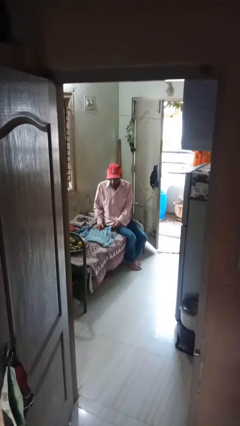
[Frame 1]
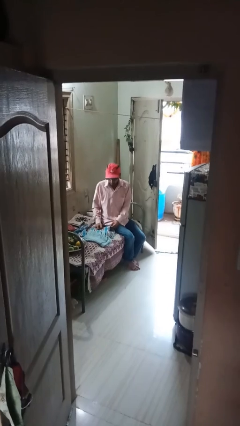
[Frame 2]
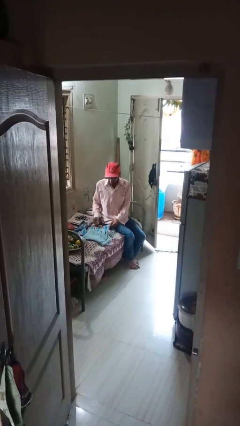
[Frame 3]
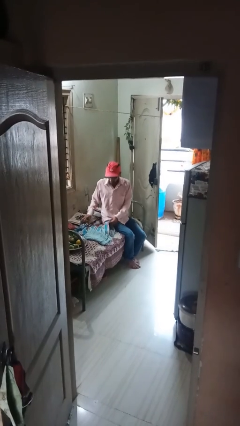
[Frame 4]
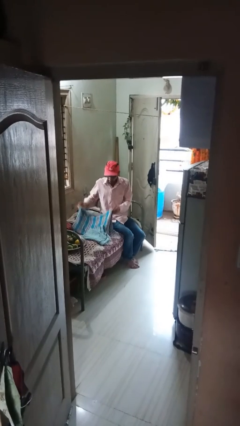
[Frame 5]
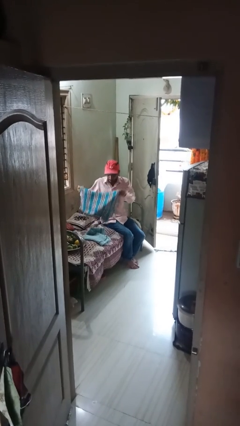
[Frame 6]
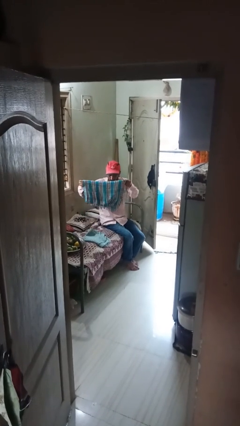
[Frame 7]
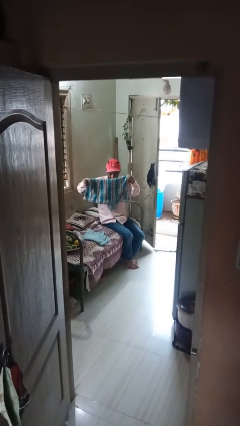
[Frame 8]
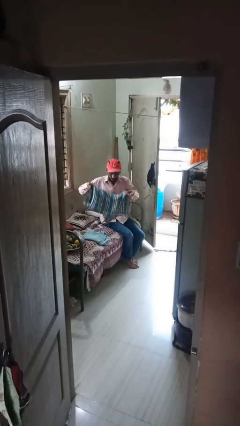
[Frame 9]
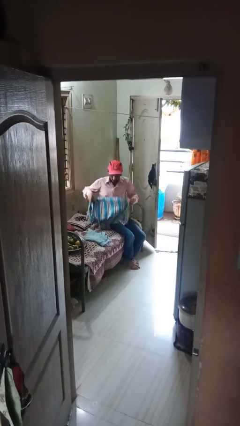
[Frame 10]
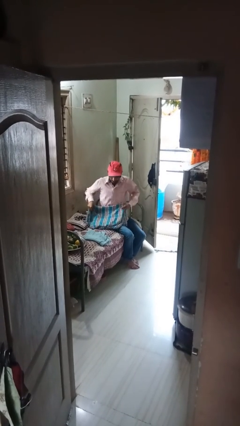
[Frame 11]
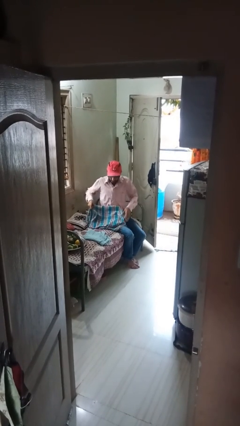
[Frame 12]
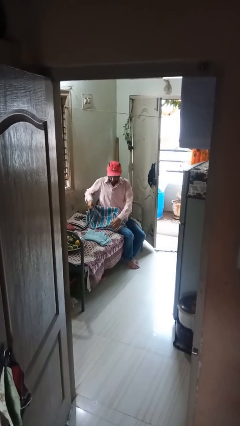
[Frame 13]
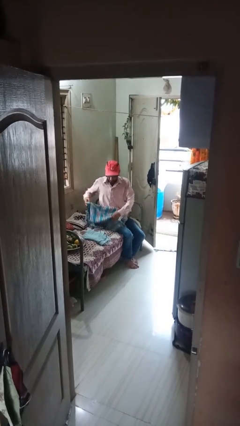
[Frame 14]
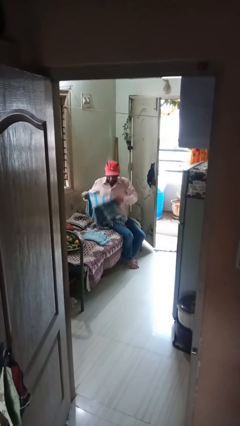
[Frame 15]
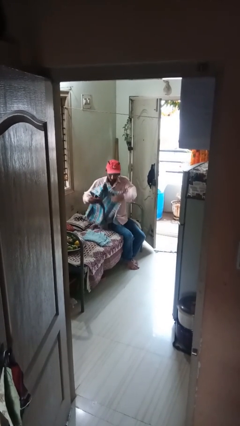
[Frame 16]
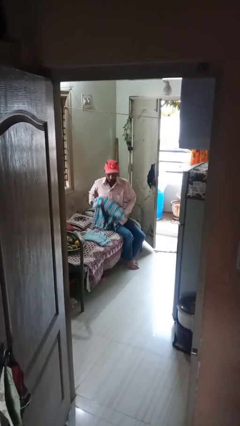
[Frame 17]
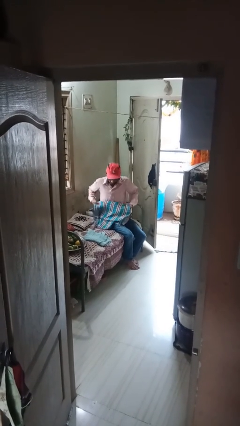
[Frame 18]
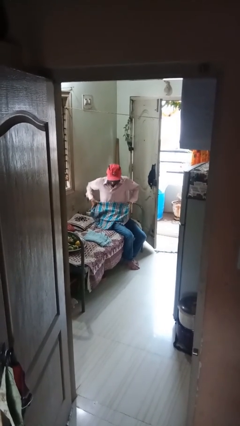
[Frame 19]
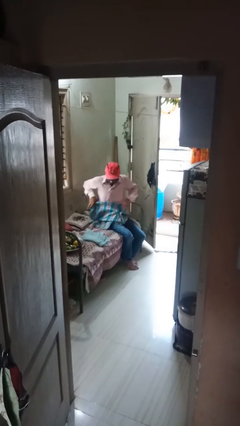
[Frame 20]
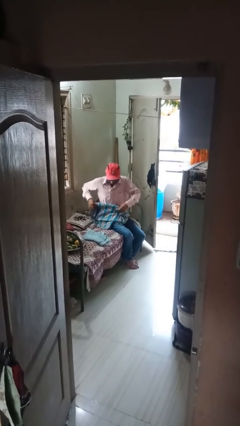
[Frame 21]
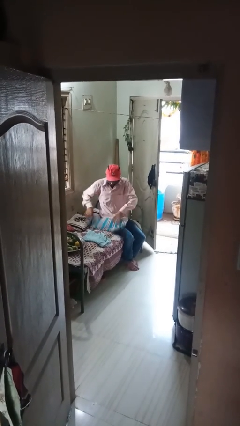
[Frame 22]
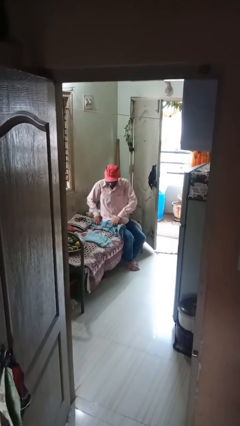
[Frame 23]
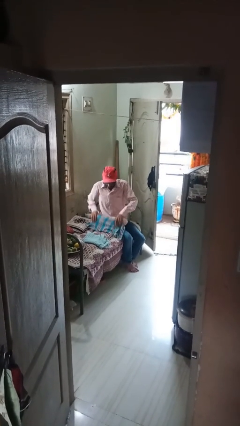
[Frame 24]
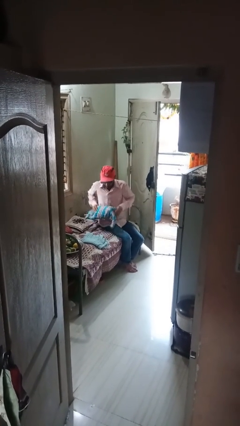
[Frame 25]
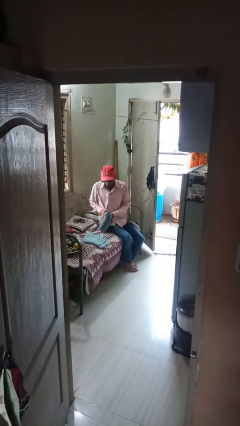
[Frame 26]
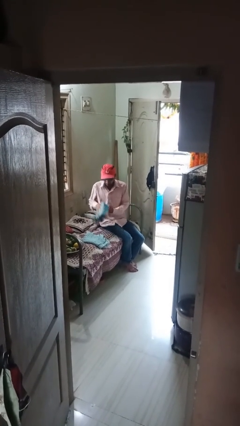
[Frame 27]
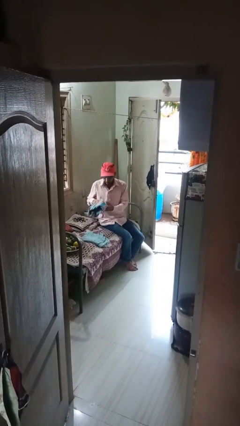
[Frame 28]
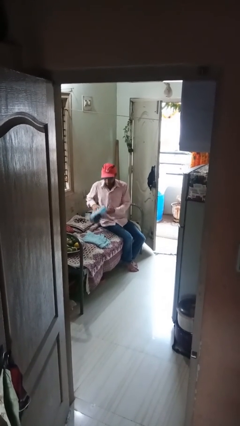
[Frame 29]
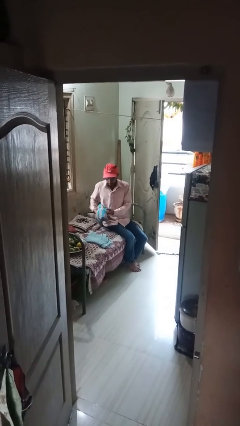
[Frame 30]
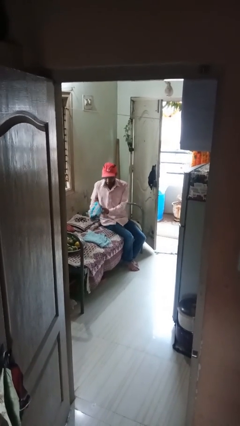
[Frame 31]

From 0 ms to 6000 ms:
person folds towel

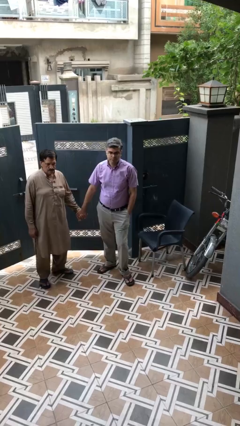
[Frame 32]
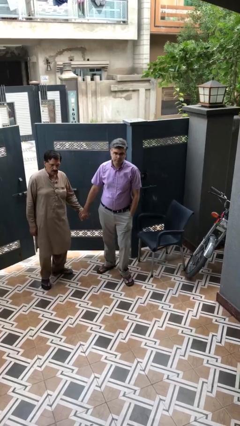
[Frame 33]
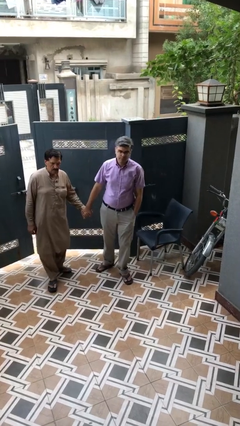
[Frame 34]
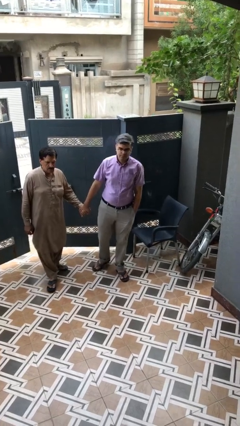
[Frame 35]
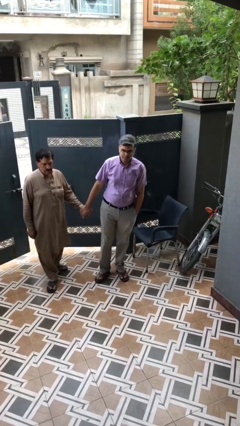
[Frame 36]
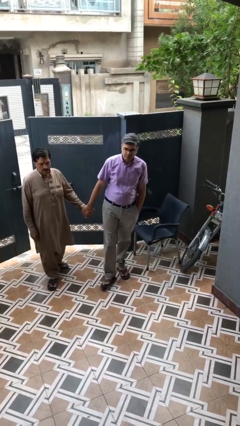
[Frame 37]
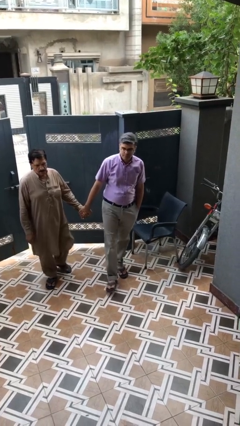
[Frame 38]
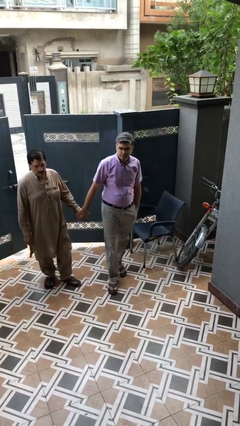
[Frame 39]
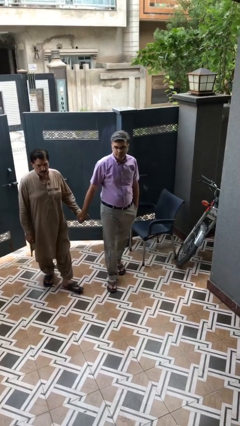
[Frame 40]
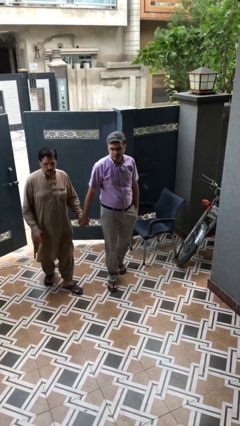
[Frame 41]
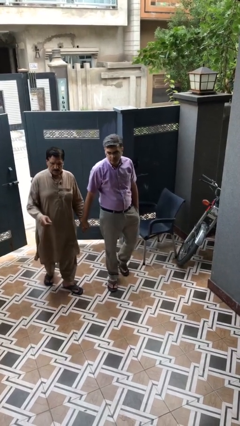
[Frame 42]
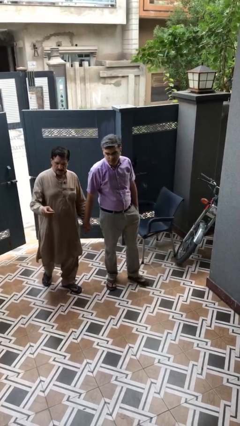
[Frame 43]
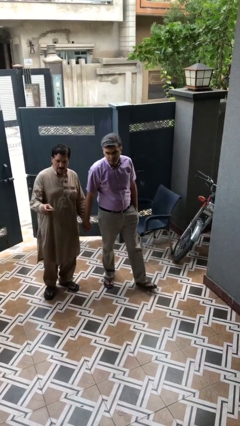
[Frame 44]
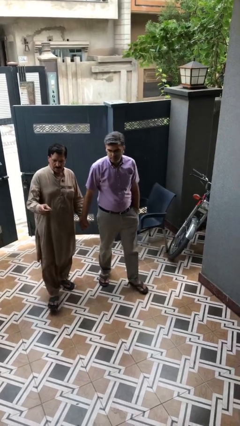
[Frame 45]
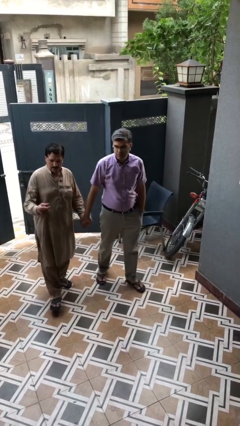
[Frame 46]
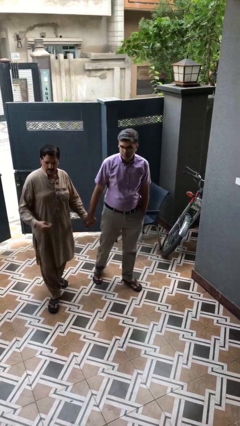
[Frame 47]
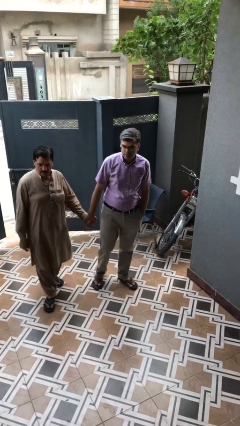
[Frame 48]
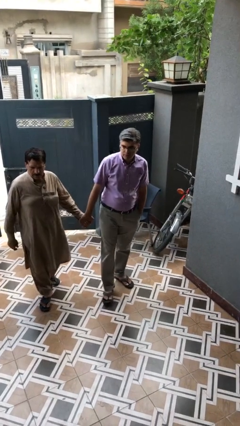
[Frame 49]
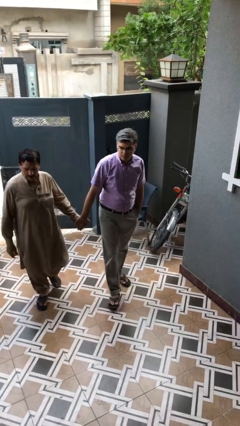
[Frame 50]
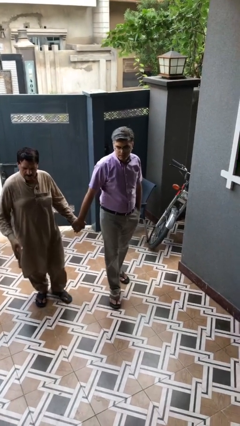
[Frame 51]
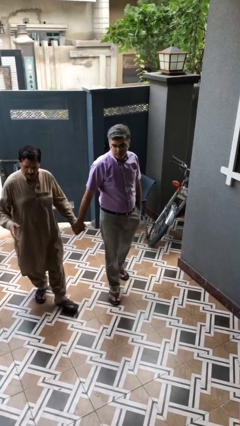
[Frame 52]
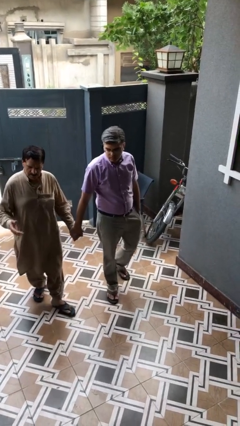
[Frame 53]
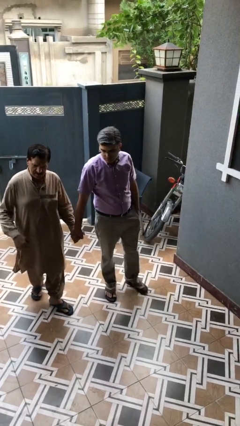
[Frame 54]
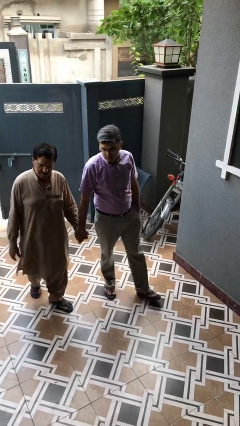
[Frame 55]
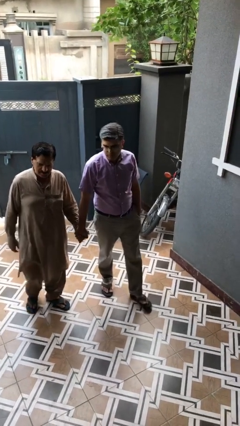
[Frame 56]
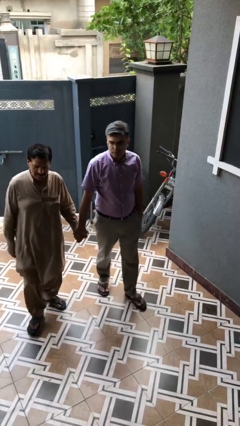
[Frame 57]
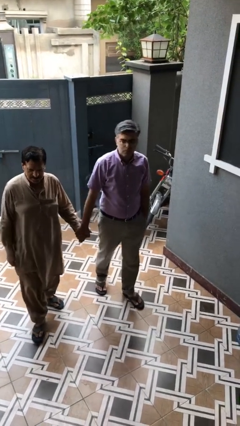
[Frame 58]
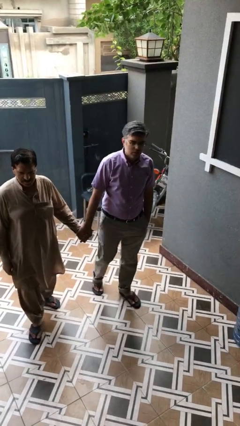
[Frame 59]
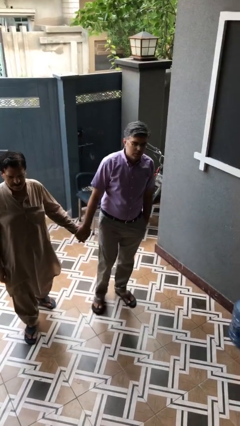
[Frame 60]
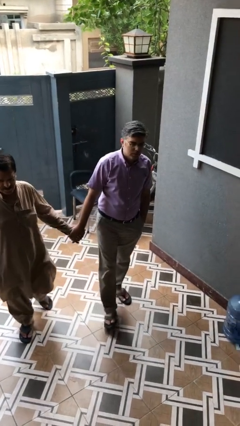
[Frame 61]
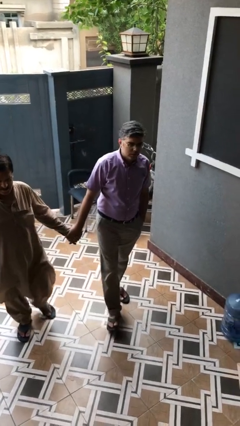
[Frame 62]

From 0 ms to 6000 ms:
person holds hand

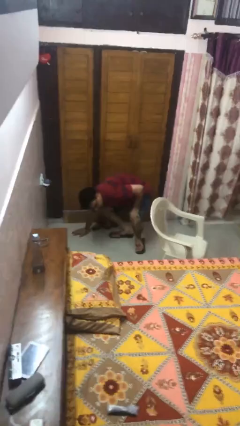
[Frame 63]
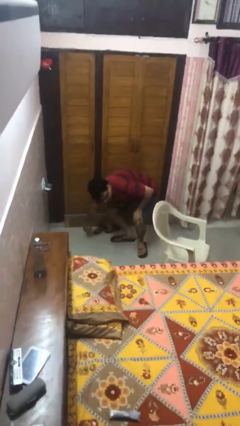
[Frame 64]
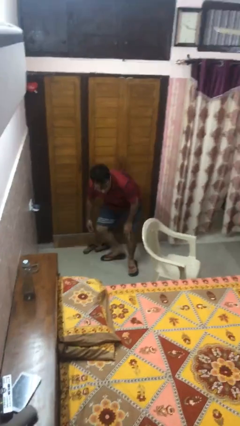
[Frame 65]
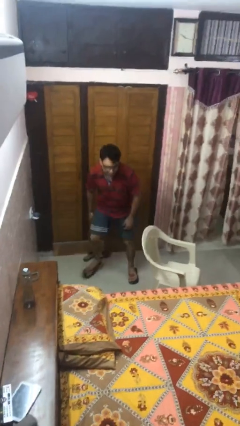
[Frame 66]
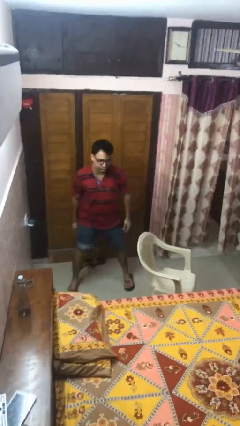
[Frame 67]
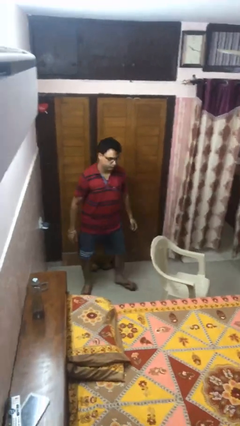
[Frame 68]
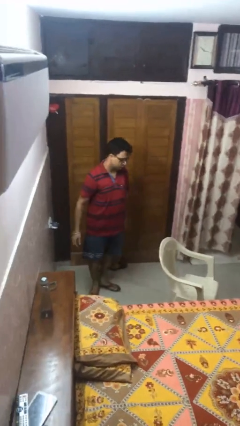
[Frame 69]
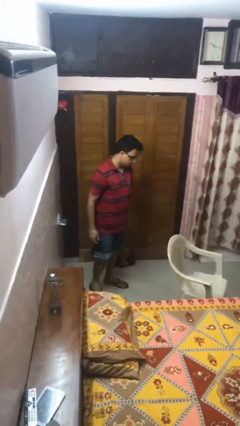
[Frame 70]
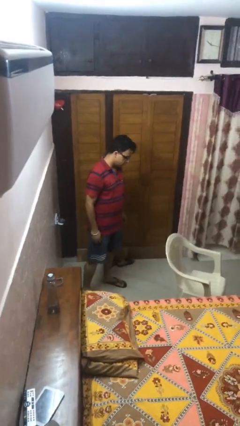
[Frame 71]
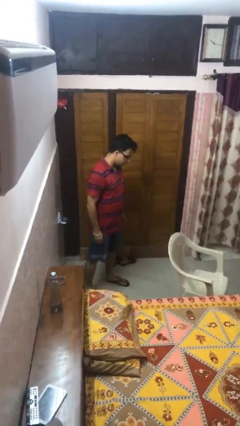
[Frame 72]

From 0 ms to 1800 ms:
person stands up from floor

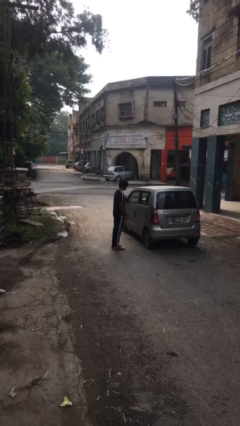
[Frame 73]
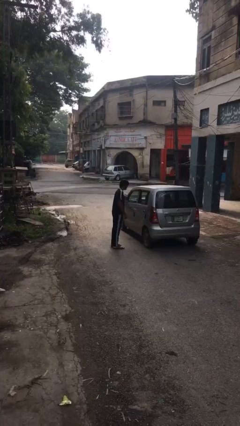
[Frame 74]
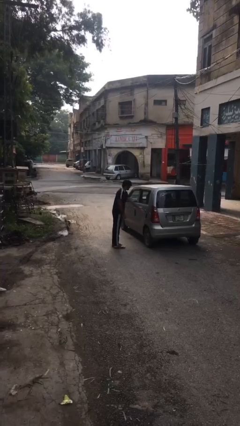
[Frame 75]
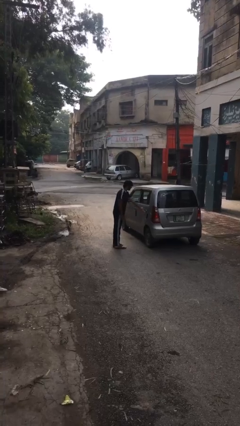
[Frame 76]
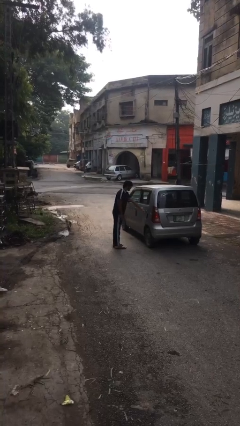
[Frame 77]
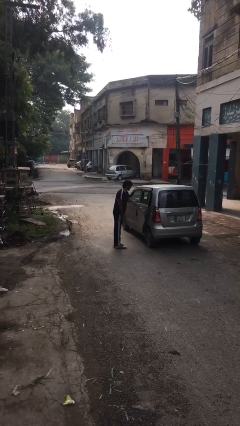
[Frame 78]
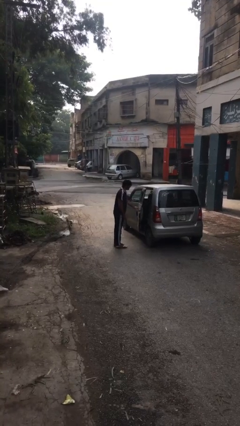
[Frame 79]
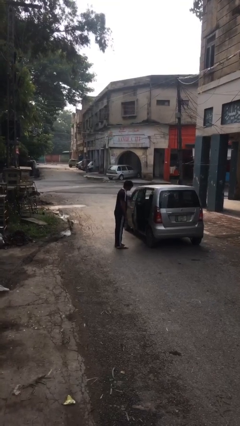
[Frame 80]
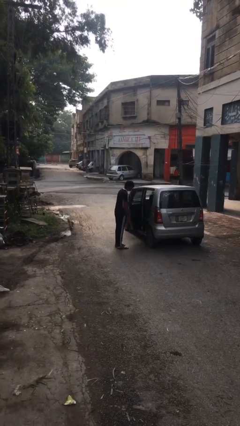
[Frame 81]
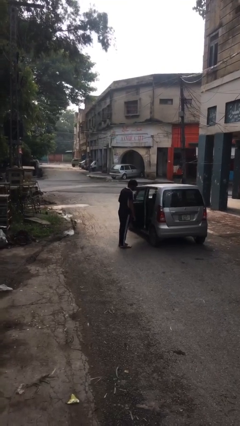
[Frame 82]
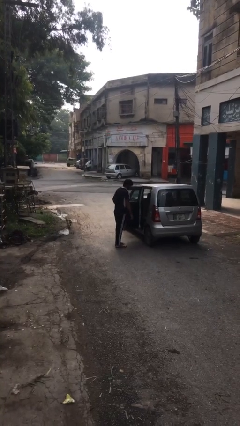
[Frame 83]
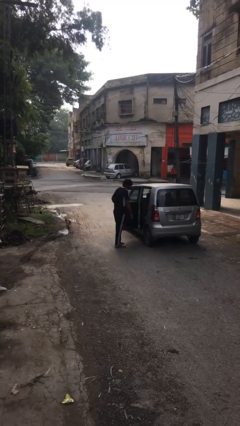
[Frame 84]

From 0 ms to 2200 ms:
person opens car door

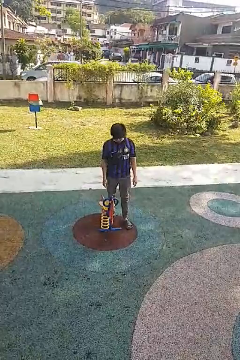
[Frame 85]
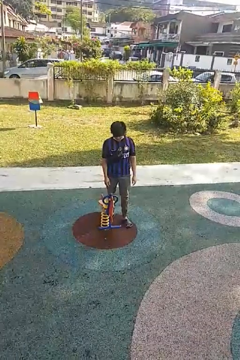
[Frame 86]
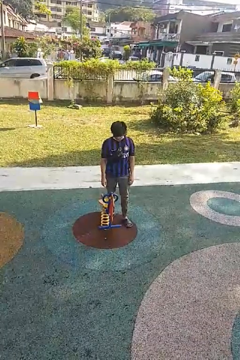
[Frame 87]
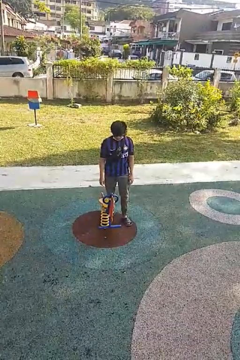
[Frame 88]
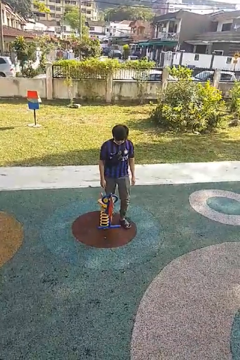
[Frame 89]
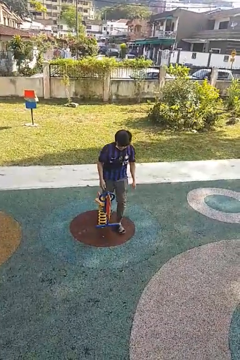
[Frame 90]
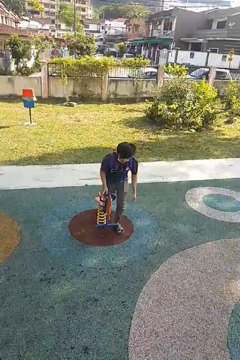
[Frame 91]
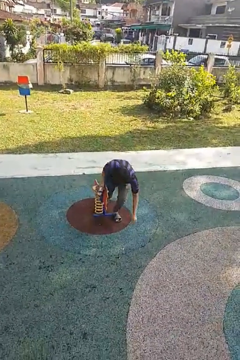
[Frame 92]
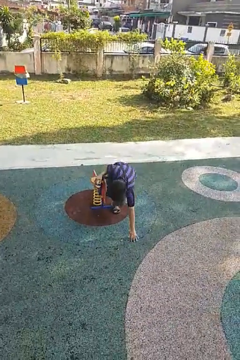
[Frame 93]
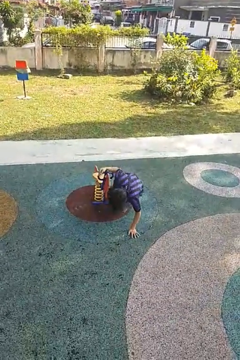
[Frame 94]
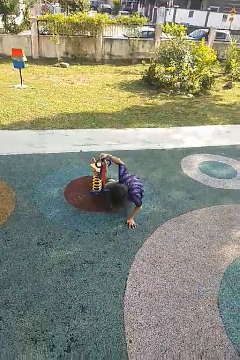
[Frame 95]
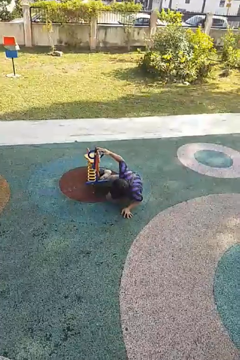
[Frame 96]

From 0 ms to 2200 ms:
person trips on object on floor
